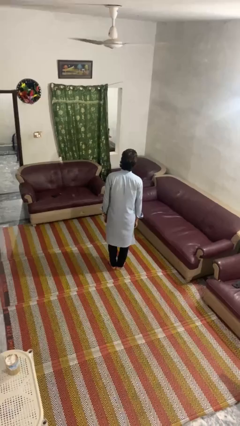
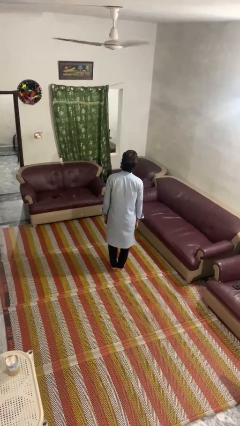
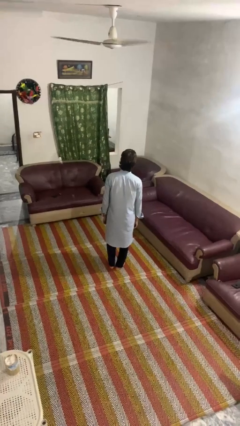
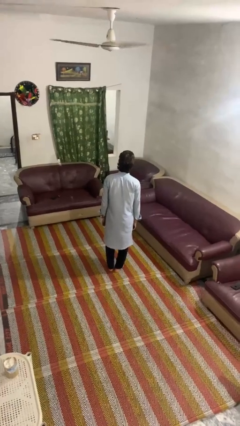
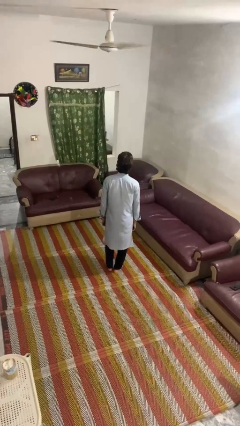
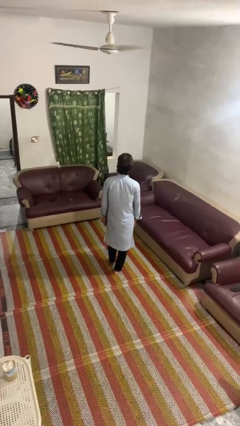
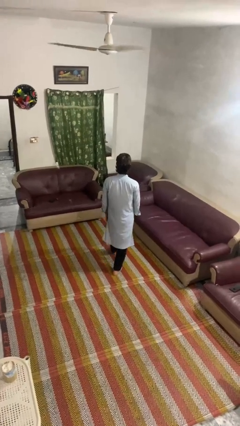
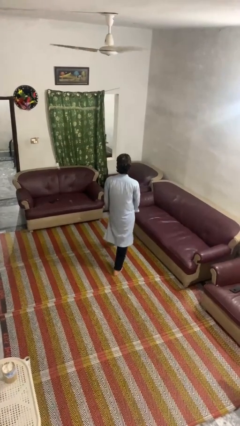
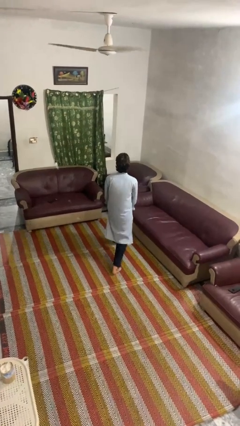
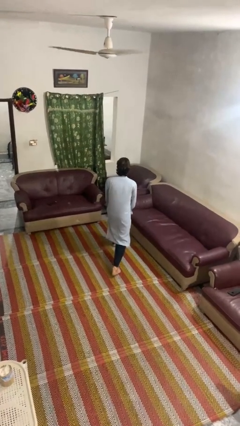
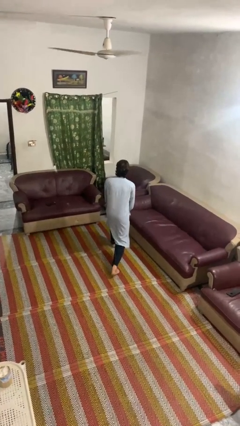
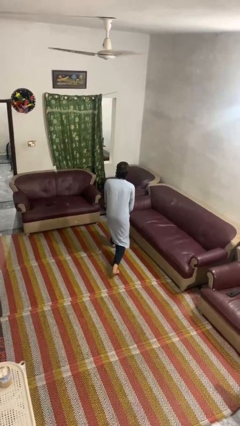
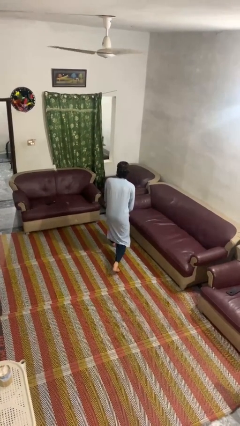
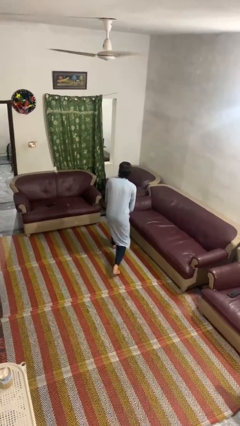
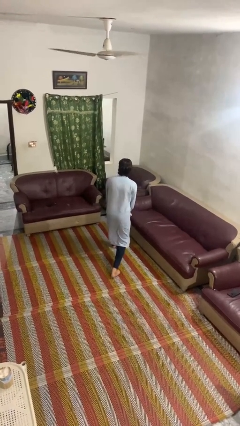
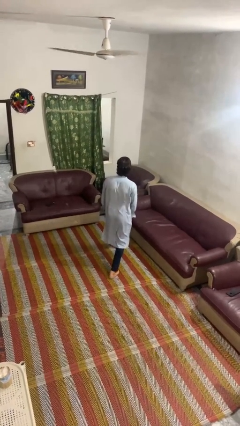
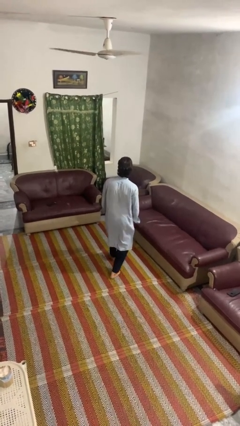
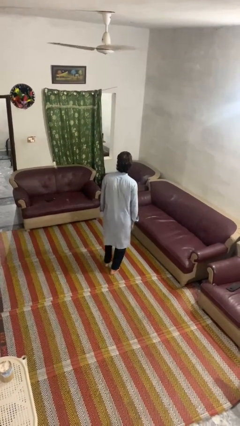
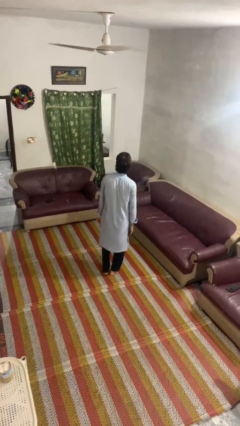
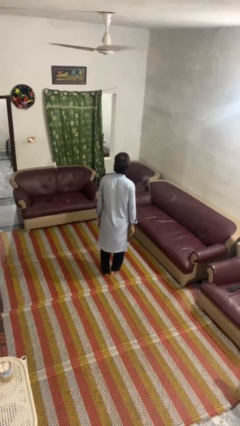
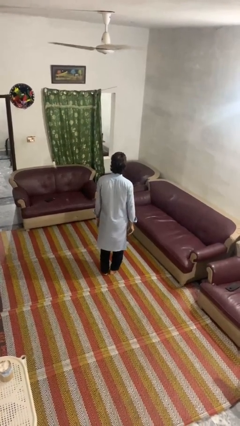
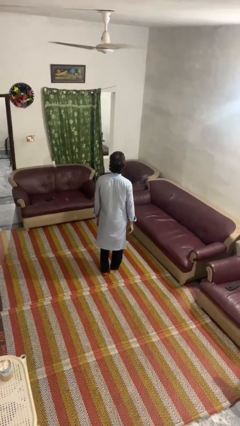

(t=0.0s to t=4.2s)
person exercises with lunges

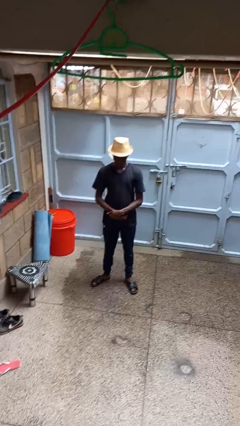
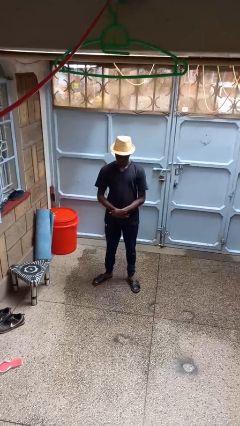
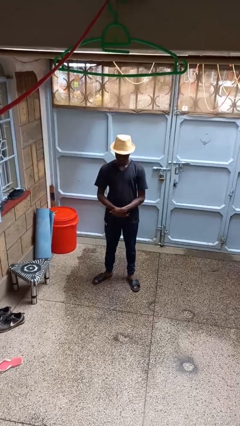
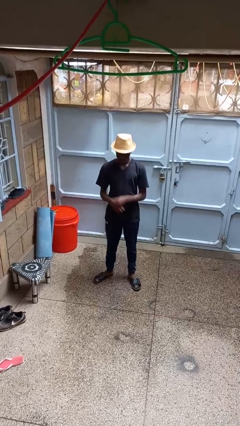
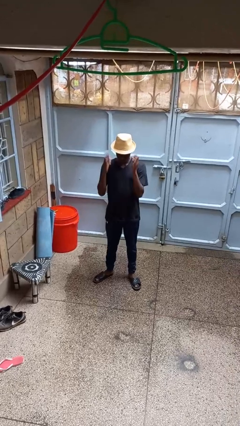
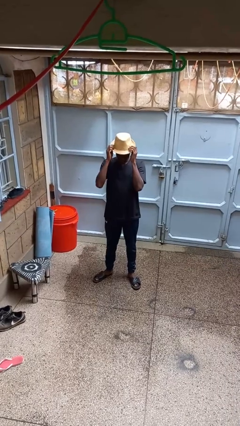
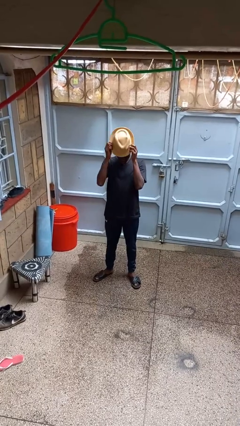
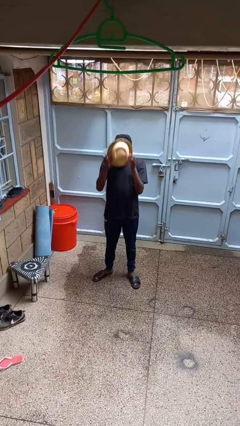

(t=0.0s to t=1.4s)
person takes off hat

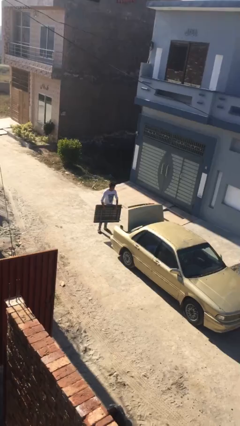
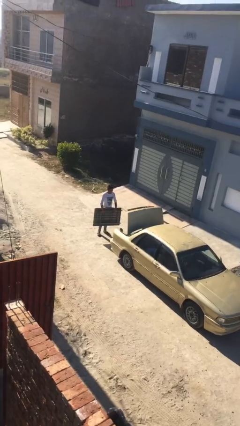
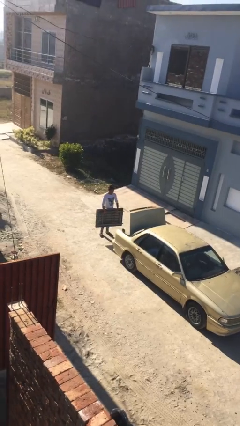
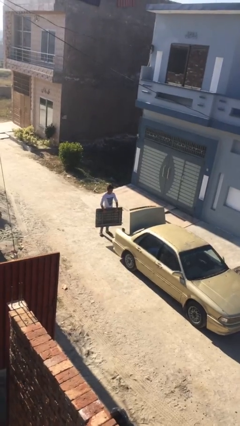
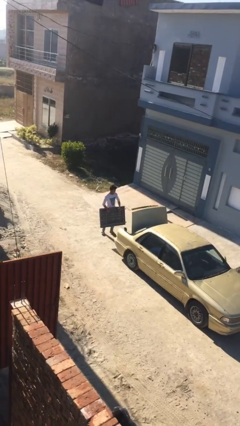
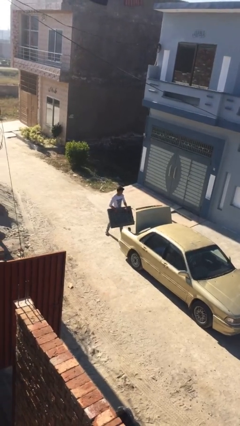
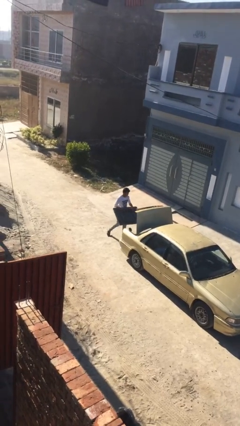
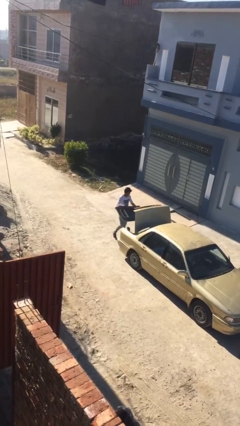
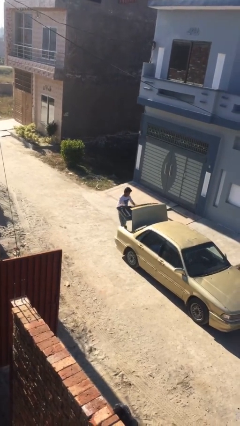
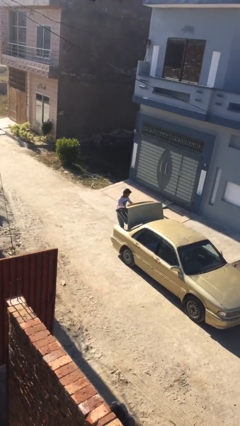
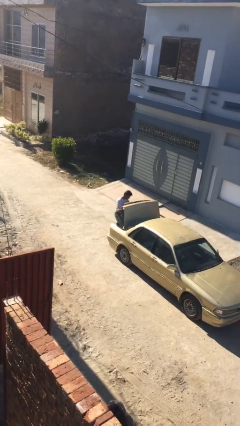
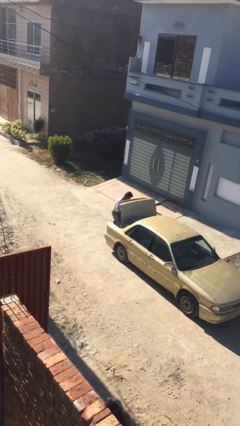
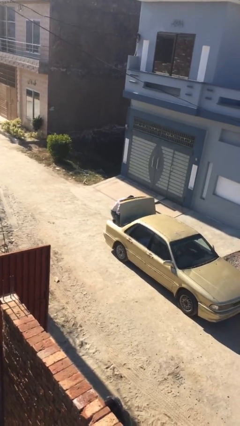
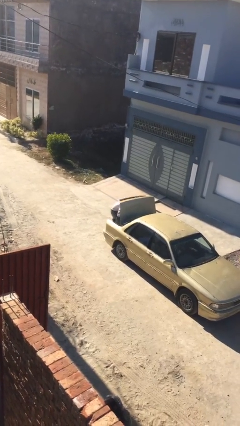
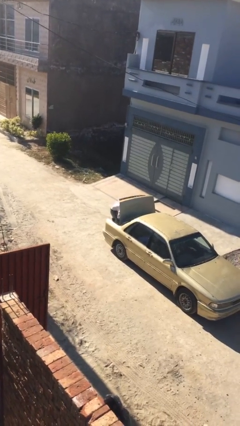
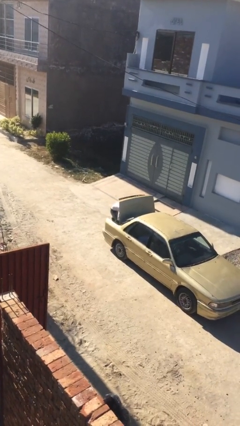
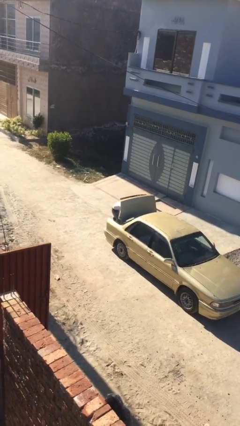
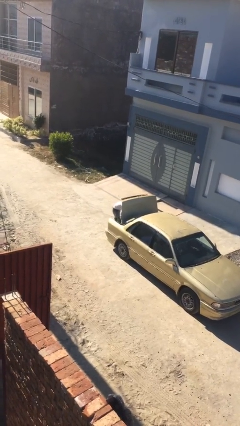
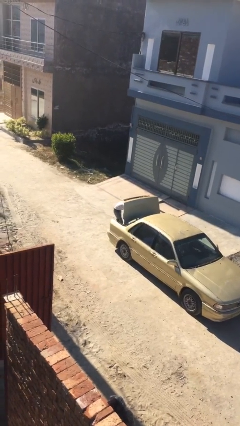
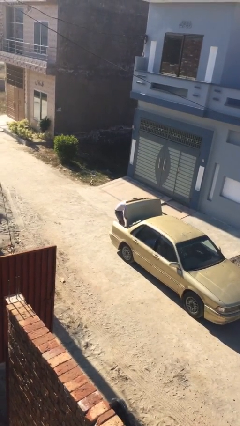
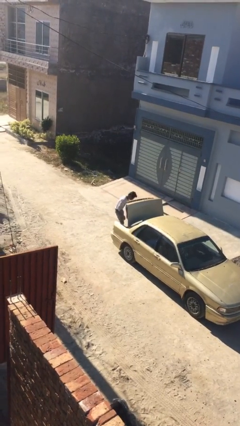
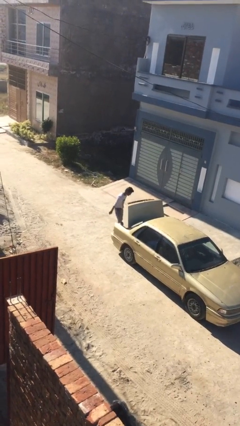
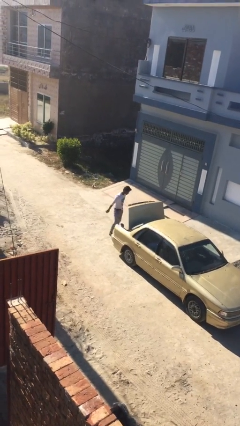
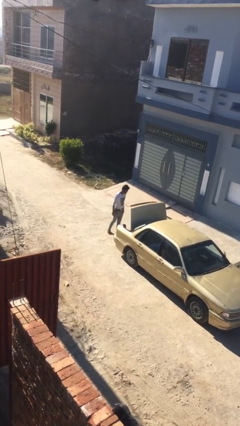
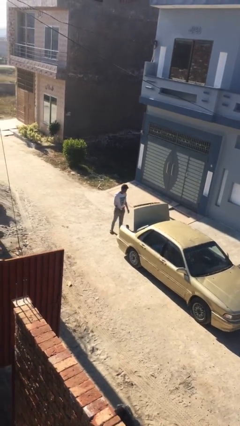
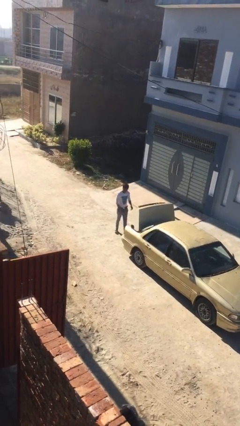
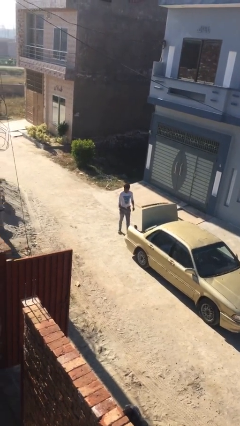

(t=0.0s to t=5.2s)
person loads car

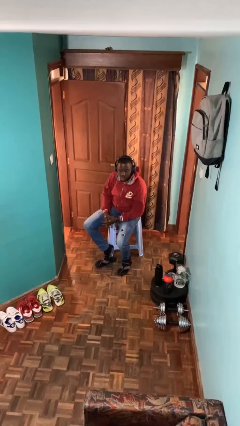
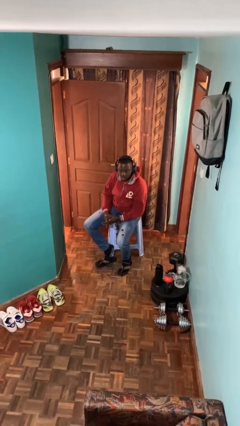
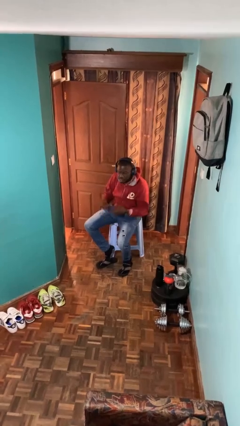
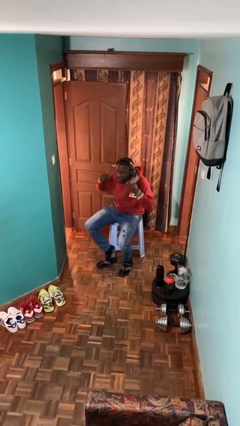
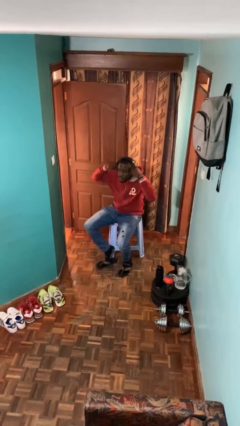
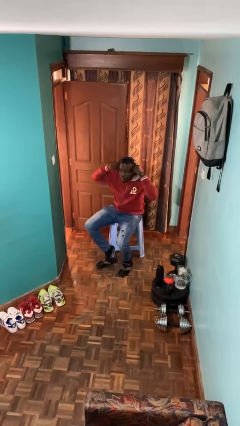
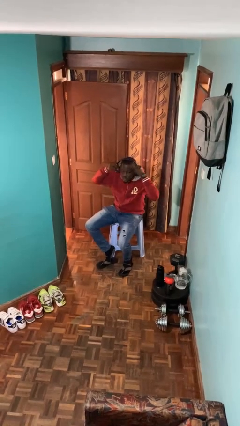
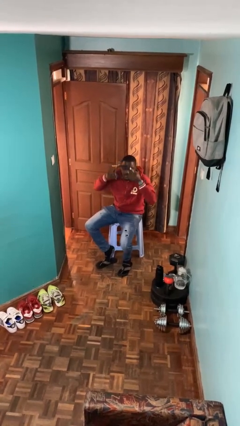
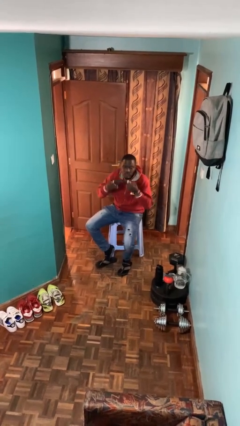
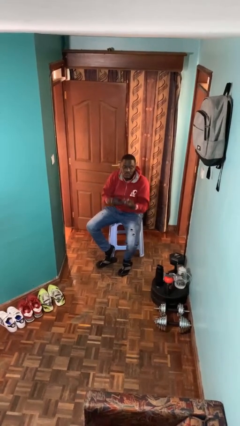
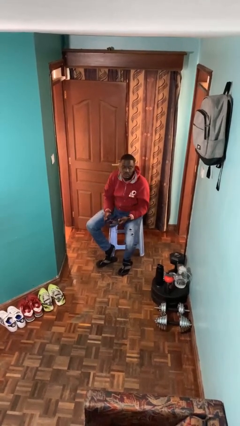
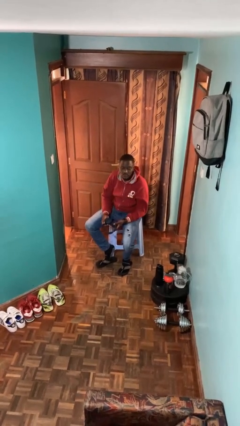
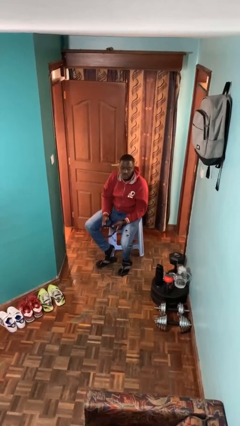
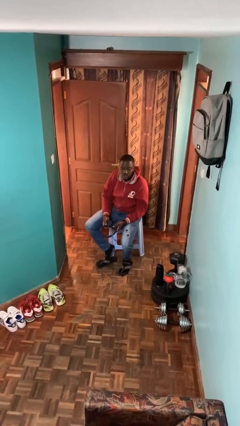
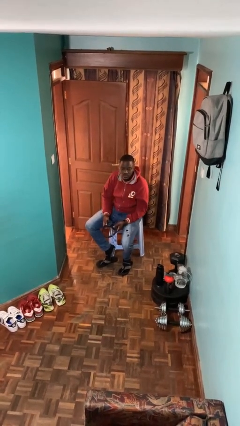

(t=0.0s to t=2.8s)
person takes off headphones

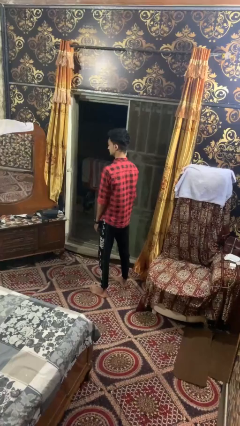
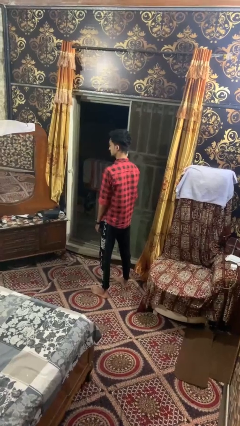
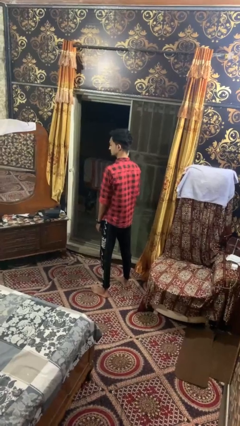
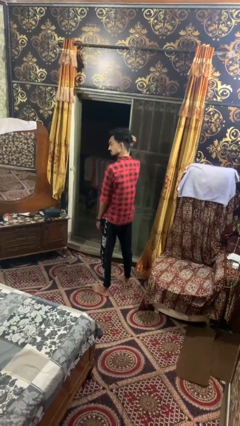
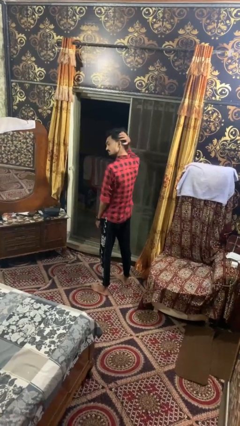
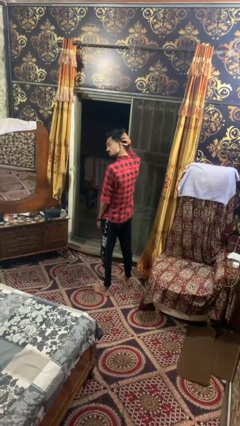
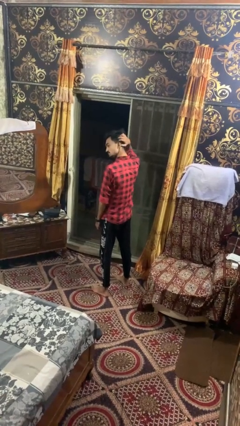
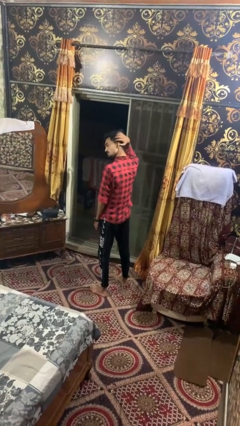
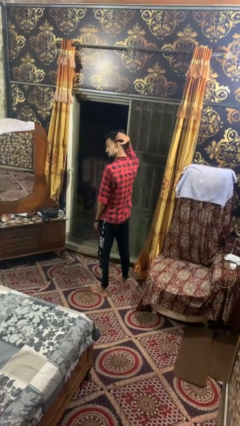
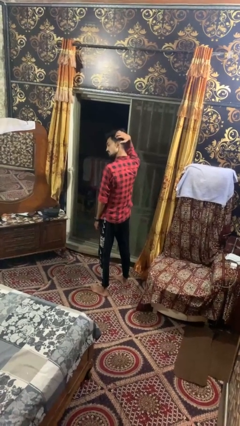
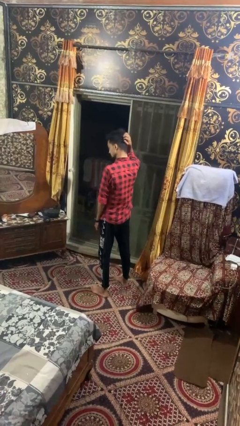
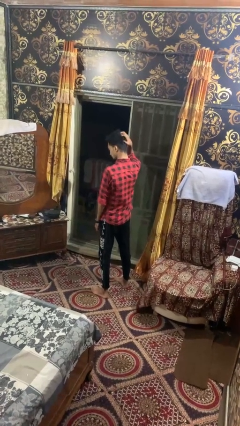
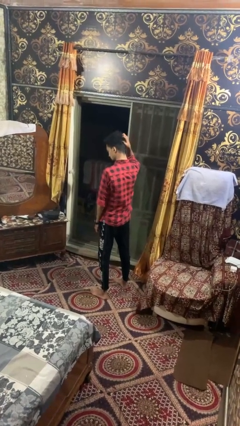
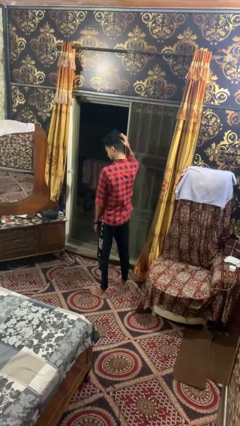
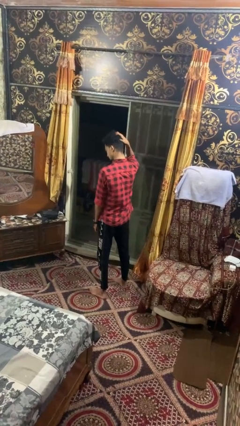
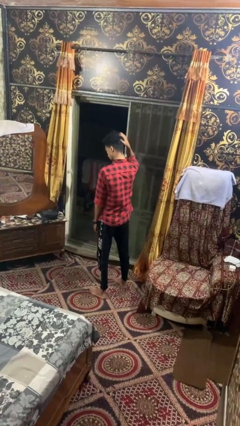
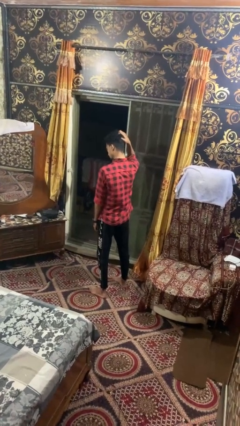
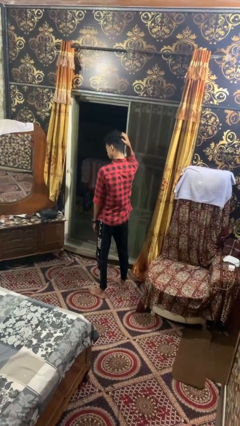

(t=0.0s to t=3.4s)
person scratches face
